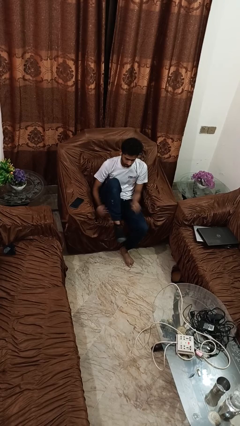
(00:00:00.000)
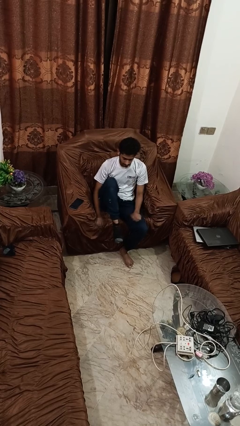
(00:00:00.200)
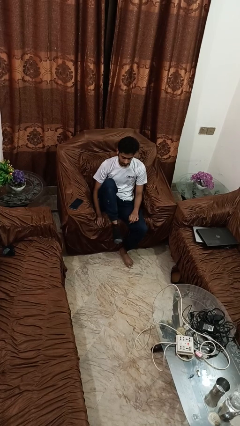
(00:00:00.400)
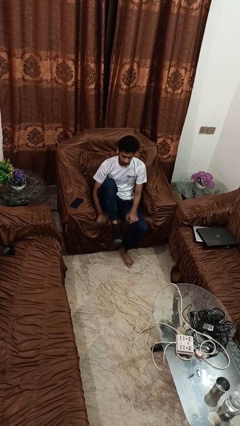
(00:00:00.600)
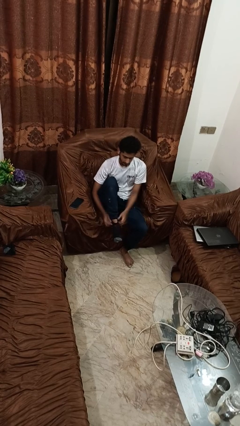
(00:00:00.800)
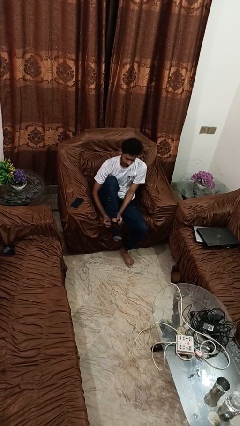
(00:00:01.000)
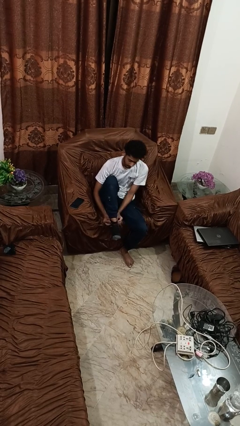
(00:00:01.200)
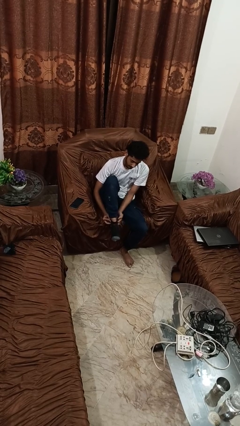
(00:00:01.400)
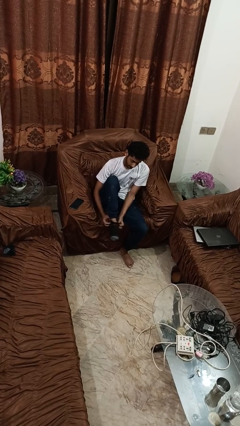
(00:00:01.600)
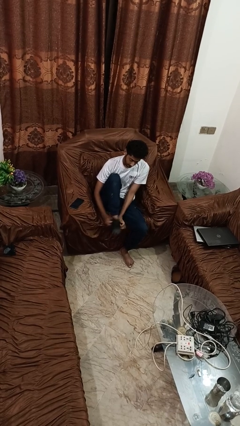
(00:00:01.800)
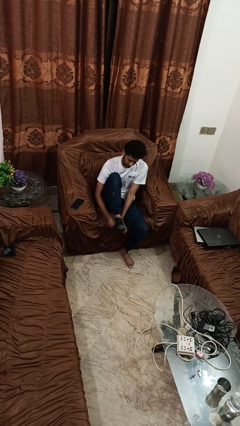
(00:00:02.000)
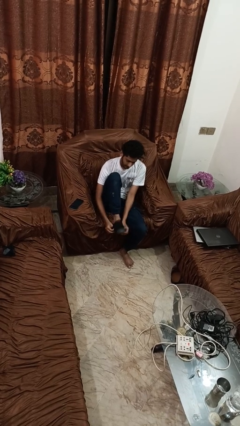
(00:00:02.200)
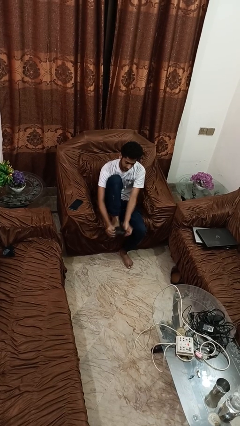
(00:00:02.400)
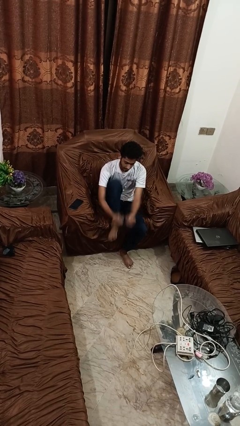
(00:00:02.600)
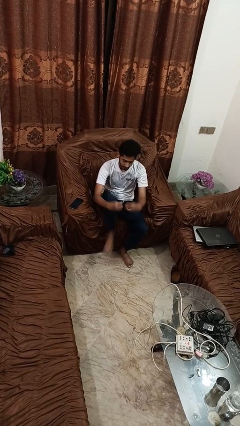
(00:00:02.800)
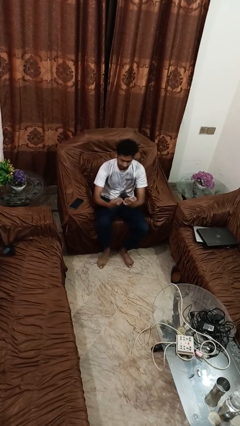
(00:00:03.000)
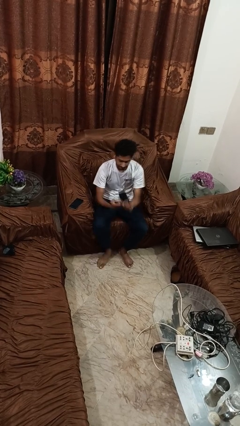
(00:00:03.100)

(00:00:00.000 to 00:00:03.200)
person takes off socks

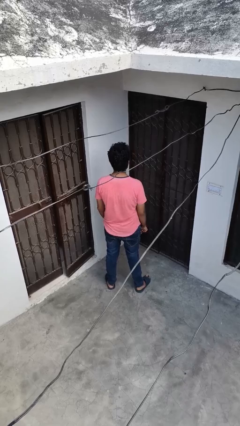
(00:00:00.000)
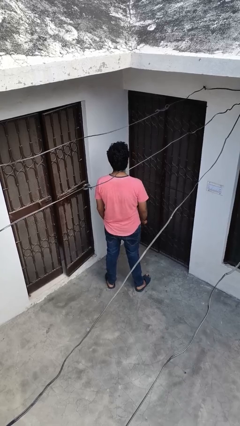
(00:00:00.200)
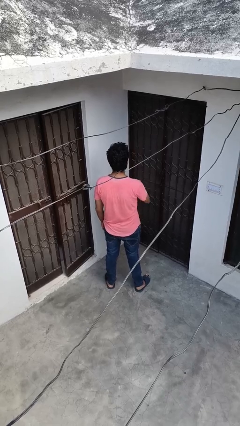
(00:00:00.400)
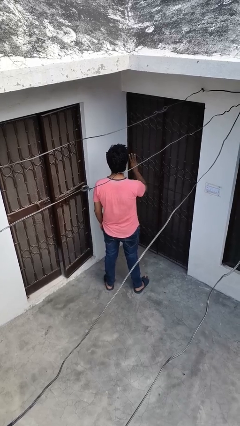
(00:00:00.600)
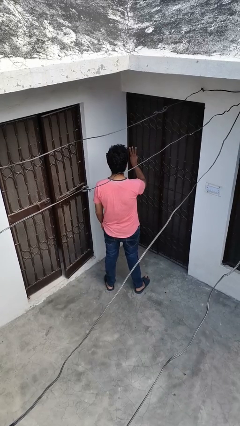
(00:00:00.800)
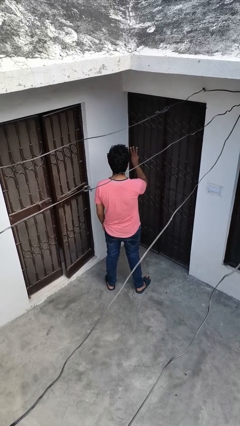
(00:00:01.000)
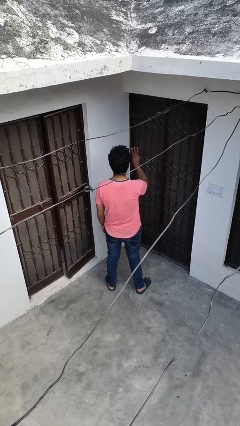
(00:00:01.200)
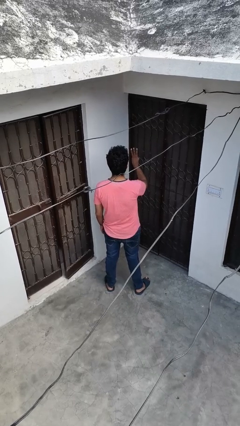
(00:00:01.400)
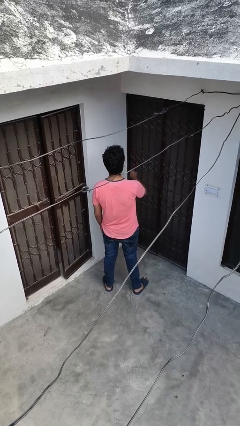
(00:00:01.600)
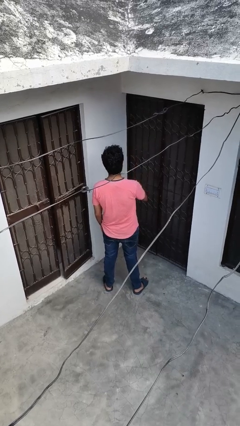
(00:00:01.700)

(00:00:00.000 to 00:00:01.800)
person gestures number three

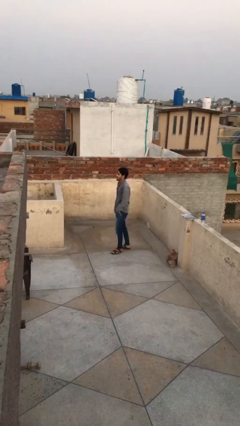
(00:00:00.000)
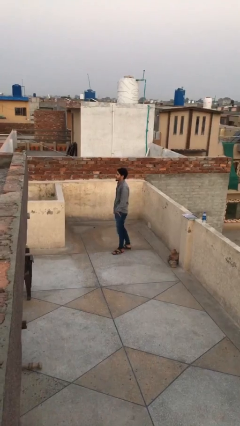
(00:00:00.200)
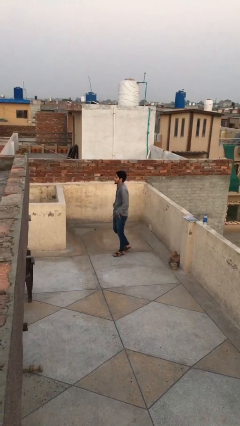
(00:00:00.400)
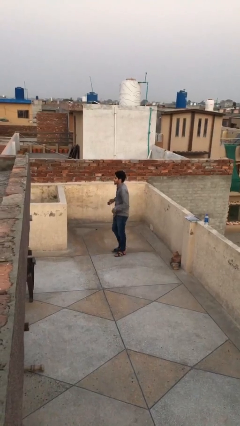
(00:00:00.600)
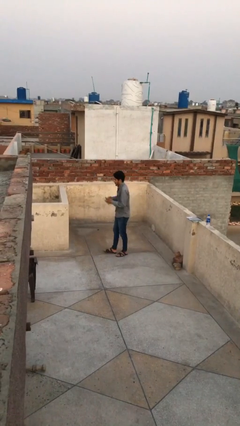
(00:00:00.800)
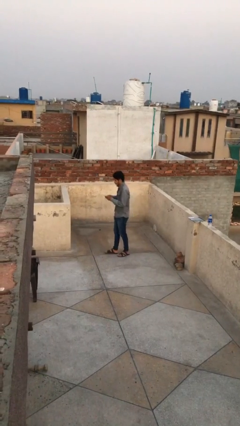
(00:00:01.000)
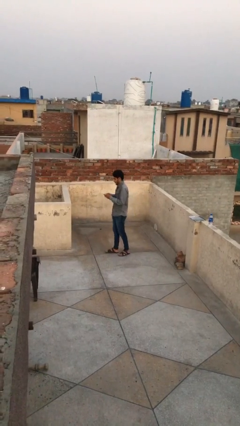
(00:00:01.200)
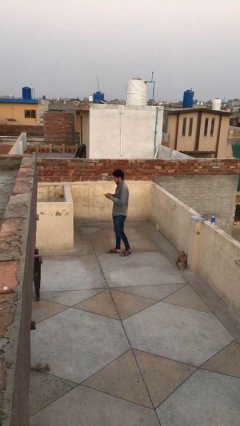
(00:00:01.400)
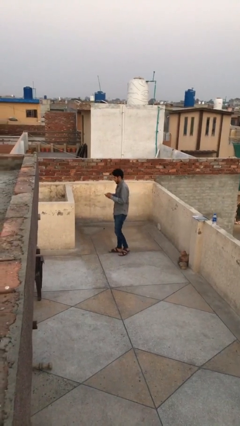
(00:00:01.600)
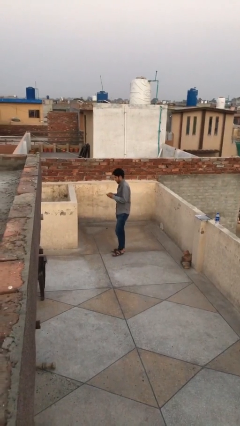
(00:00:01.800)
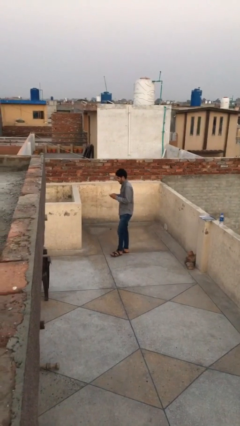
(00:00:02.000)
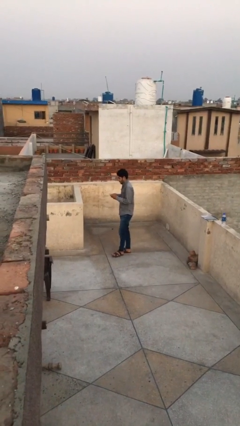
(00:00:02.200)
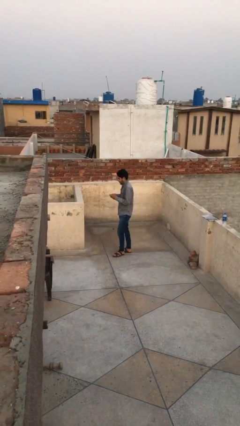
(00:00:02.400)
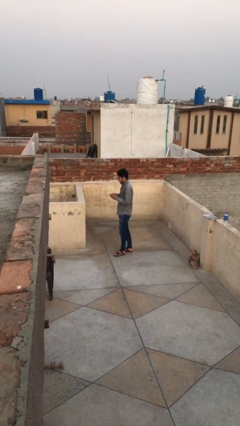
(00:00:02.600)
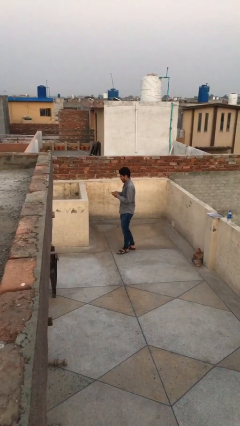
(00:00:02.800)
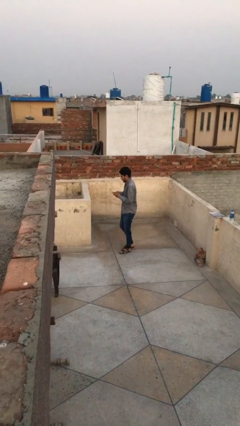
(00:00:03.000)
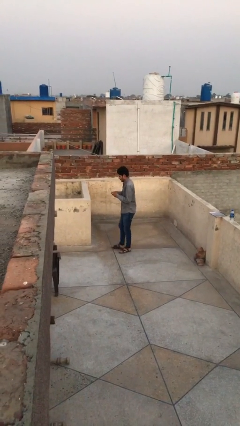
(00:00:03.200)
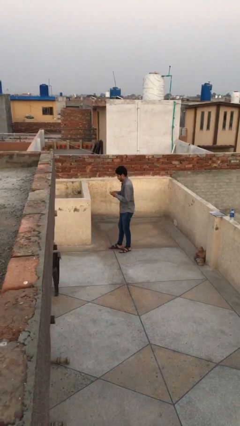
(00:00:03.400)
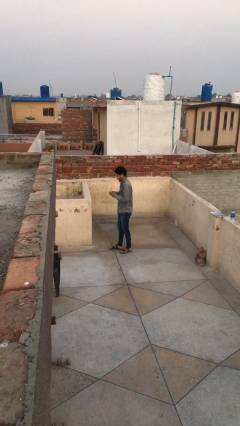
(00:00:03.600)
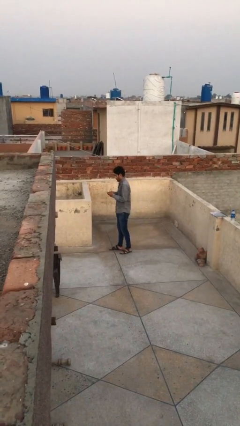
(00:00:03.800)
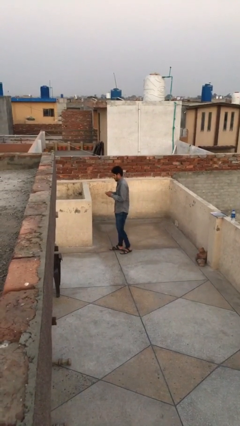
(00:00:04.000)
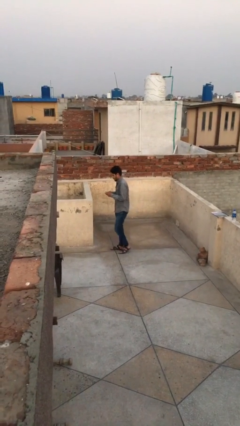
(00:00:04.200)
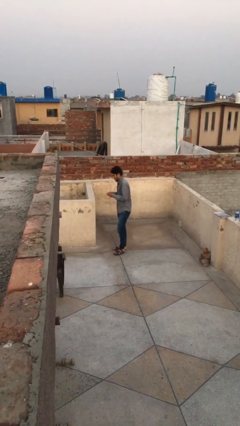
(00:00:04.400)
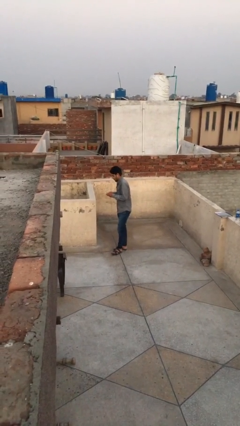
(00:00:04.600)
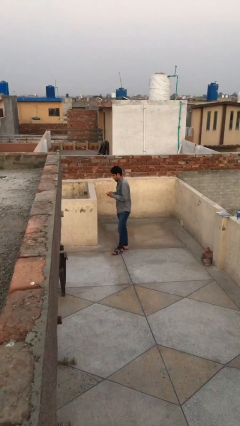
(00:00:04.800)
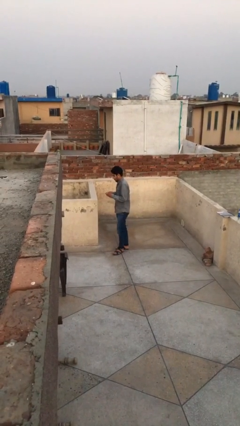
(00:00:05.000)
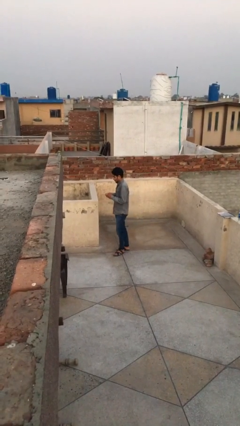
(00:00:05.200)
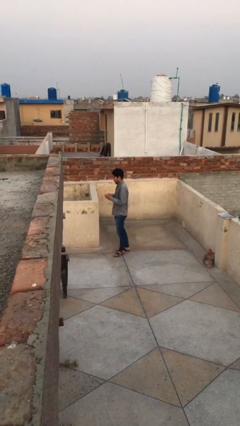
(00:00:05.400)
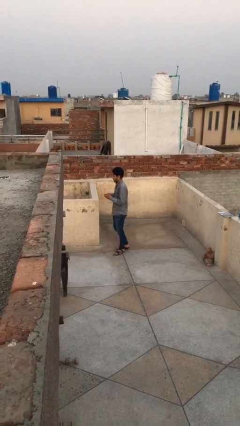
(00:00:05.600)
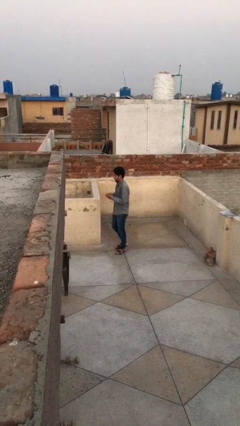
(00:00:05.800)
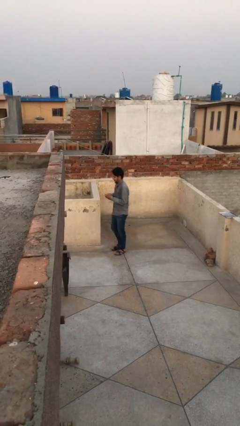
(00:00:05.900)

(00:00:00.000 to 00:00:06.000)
person texts on phone

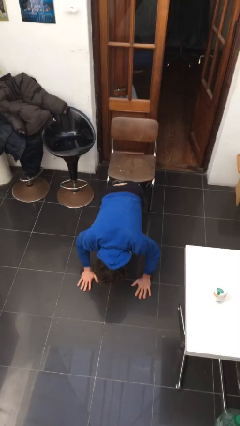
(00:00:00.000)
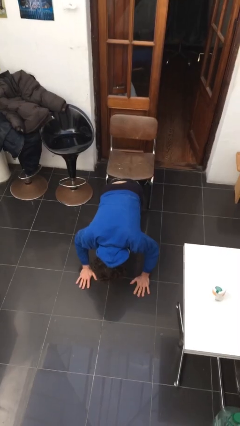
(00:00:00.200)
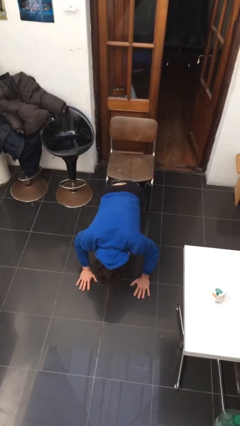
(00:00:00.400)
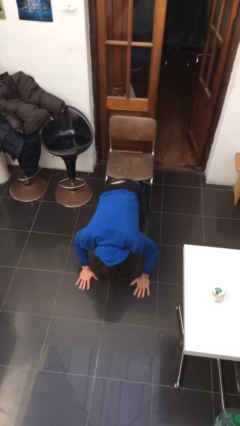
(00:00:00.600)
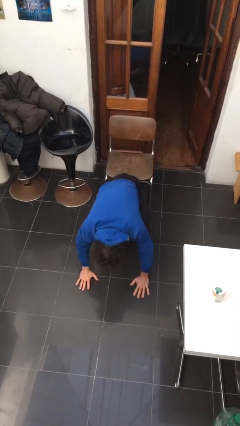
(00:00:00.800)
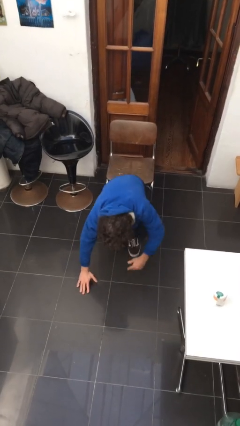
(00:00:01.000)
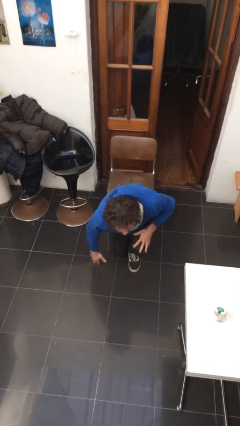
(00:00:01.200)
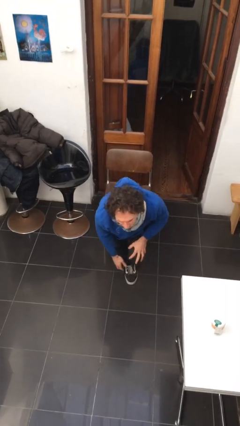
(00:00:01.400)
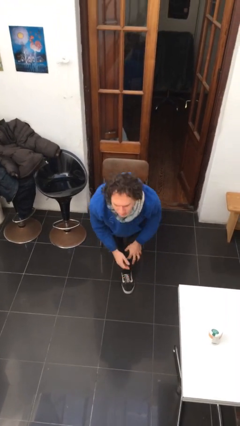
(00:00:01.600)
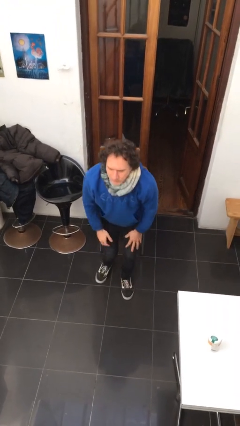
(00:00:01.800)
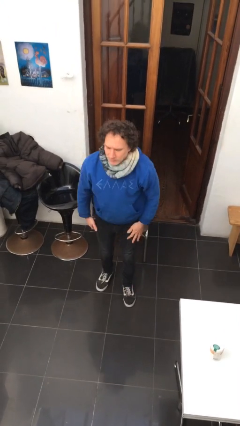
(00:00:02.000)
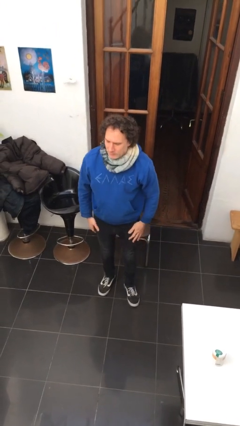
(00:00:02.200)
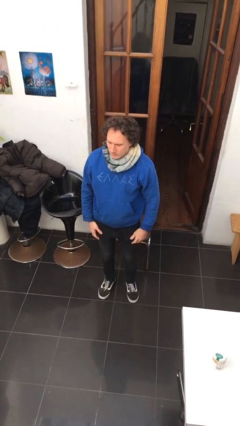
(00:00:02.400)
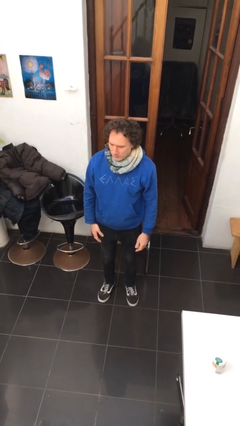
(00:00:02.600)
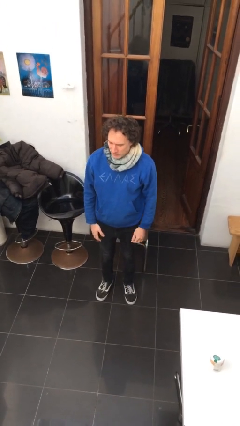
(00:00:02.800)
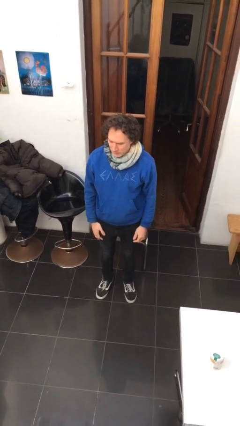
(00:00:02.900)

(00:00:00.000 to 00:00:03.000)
person stands up from floor

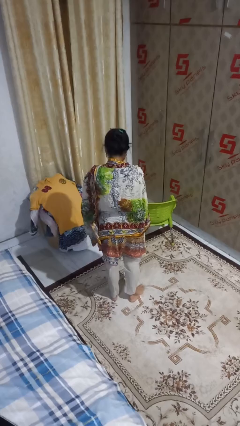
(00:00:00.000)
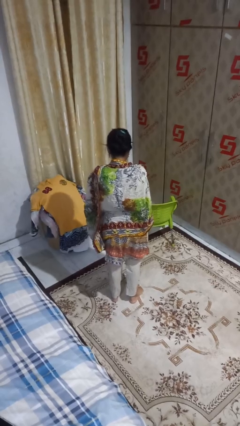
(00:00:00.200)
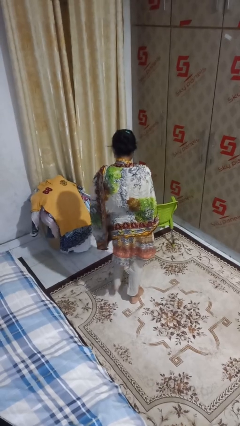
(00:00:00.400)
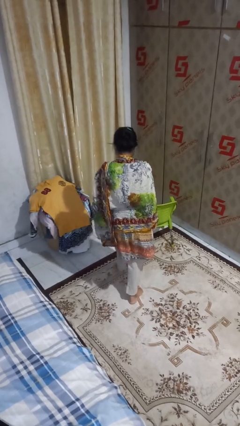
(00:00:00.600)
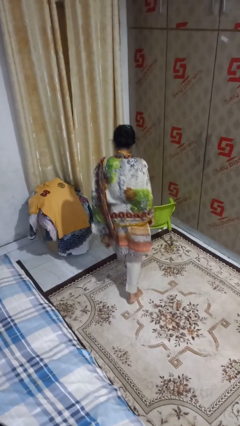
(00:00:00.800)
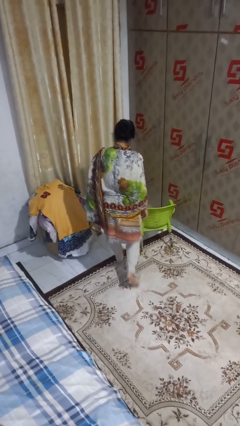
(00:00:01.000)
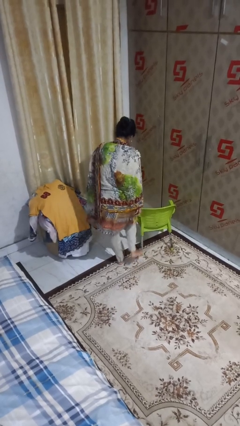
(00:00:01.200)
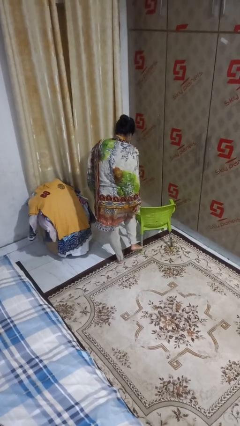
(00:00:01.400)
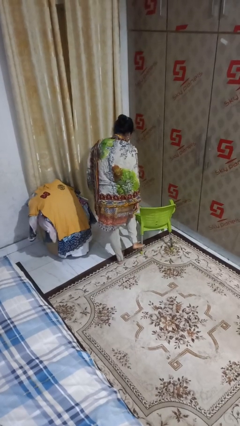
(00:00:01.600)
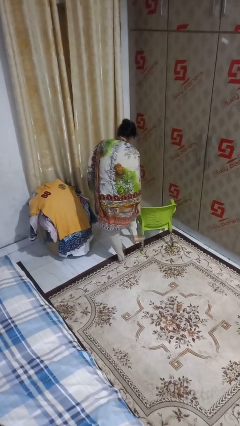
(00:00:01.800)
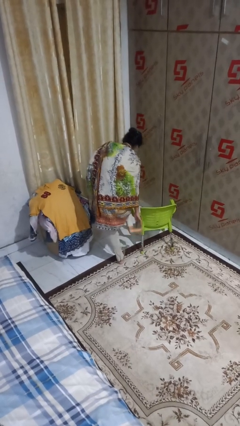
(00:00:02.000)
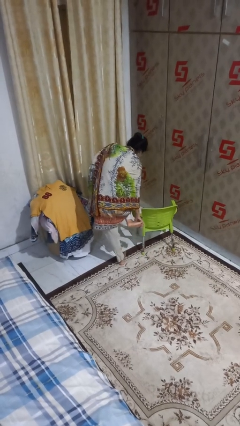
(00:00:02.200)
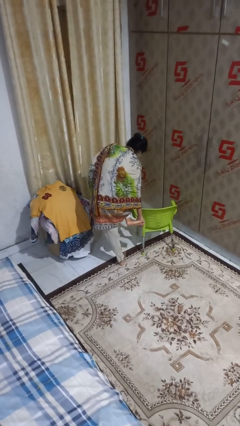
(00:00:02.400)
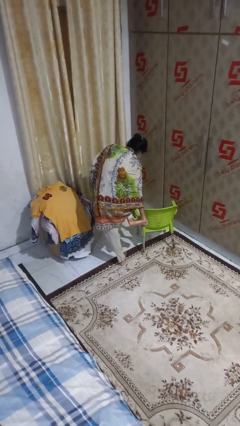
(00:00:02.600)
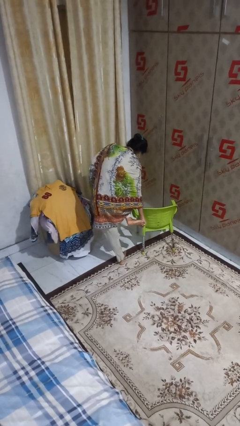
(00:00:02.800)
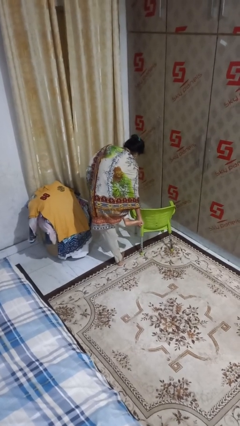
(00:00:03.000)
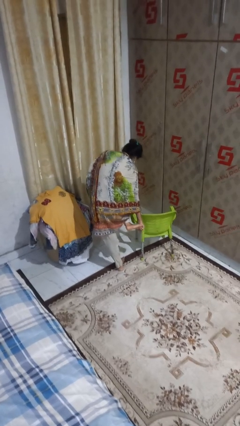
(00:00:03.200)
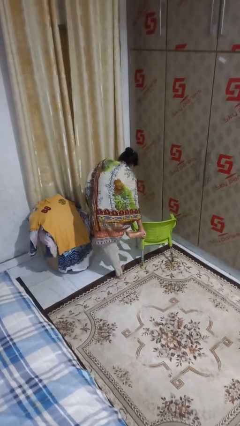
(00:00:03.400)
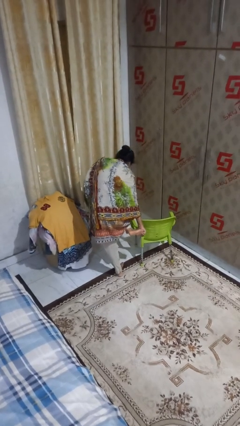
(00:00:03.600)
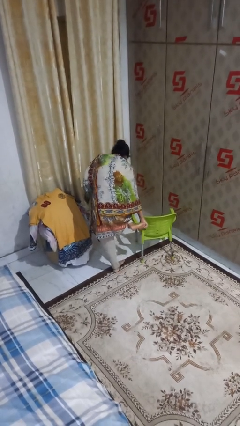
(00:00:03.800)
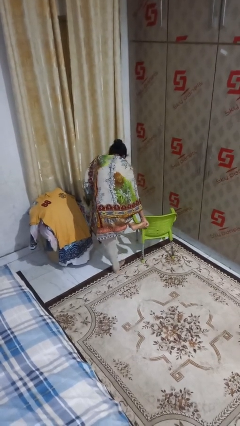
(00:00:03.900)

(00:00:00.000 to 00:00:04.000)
person stubs toe
